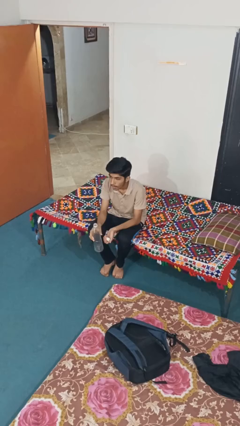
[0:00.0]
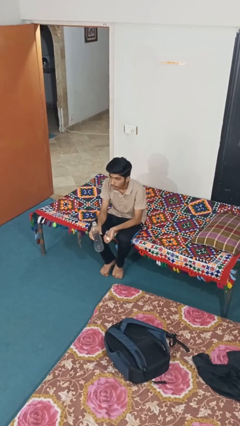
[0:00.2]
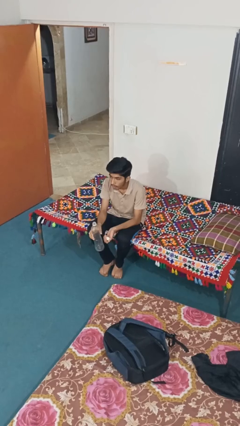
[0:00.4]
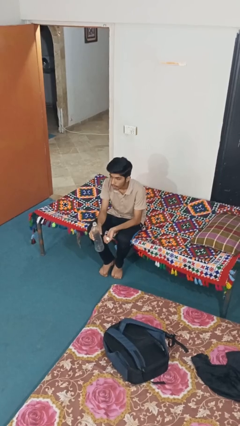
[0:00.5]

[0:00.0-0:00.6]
person drinks from bottle

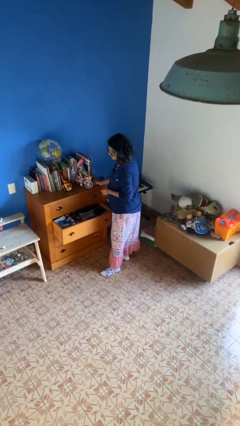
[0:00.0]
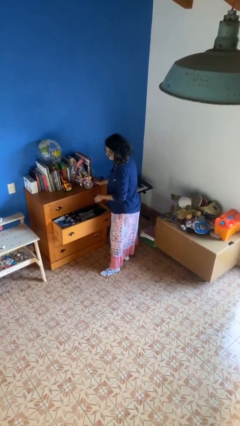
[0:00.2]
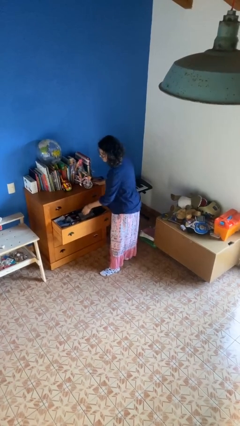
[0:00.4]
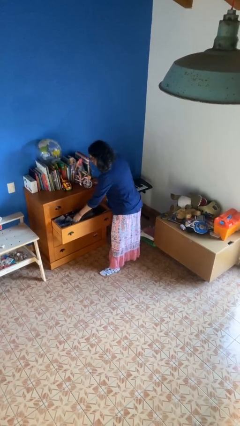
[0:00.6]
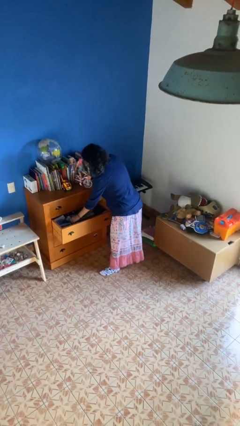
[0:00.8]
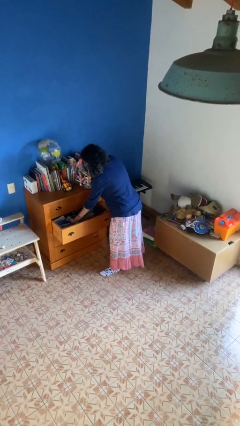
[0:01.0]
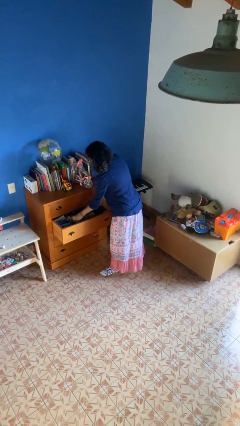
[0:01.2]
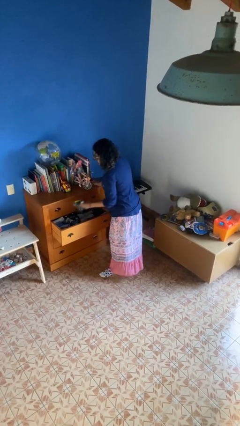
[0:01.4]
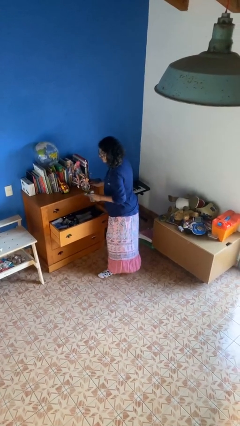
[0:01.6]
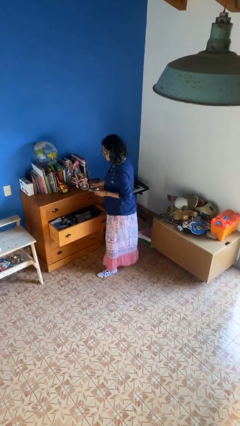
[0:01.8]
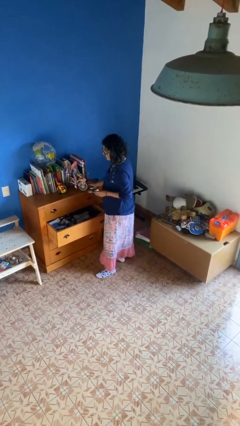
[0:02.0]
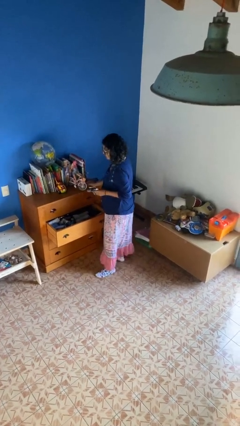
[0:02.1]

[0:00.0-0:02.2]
person takes clothes from dresser

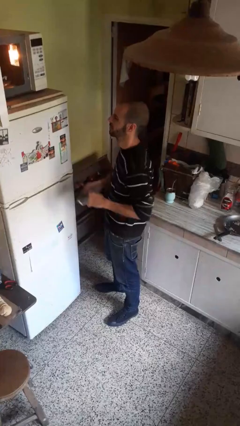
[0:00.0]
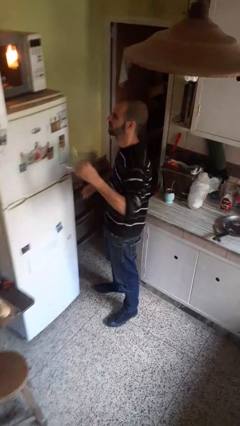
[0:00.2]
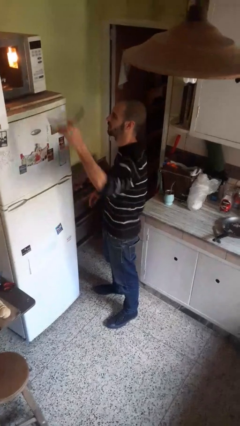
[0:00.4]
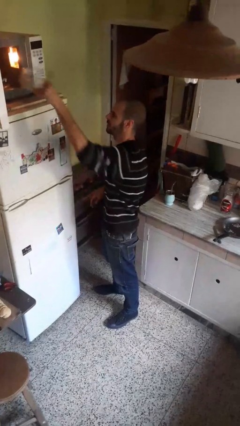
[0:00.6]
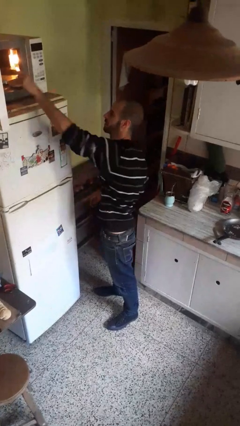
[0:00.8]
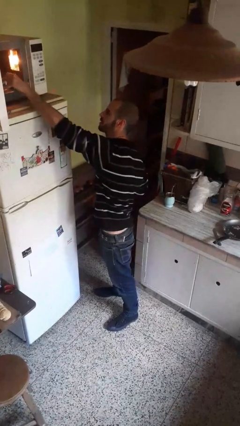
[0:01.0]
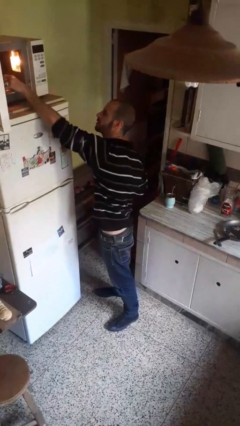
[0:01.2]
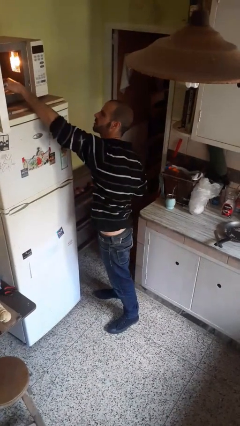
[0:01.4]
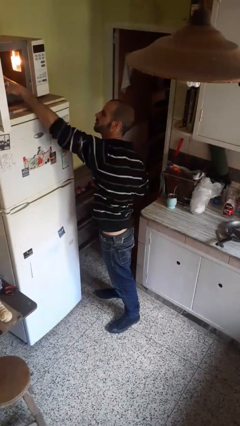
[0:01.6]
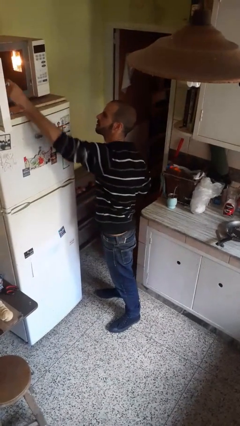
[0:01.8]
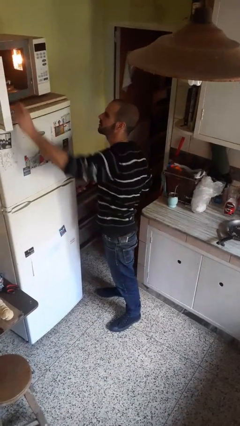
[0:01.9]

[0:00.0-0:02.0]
person puts object into microwave

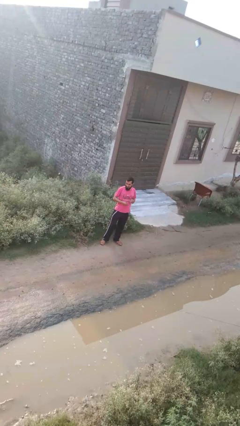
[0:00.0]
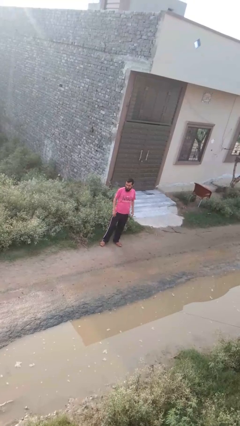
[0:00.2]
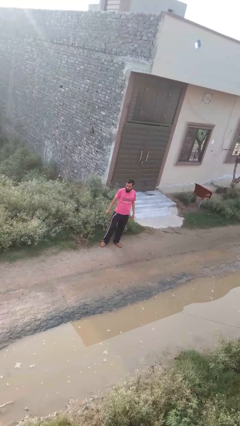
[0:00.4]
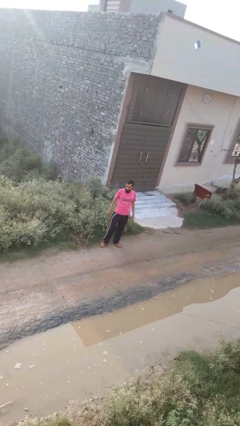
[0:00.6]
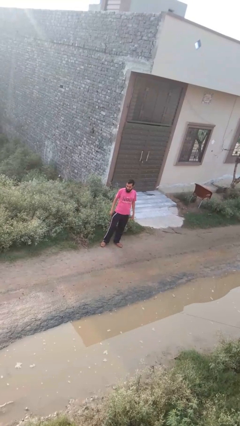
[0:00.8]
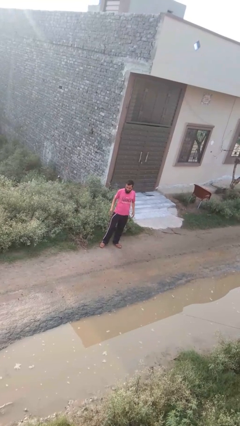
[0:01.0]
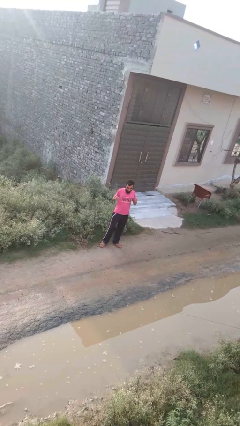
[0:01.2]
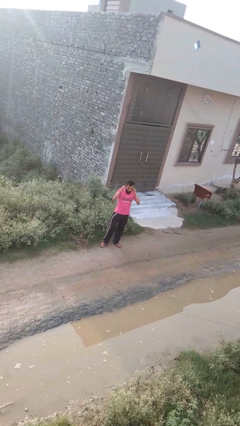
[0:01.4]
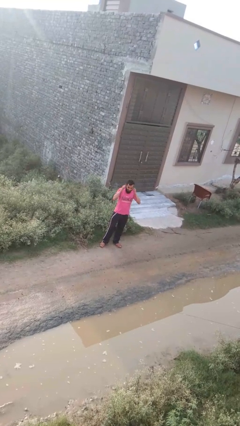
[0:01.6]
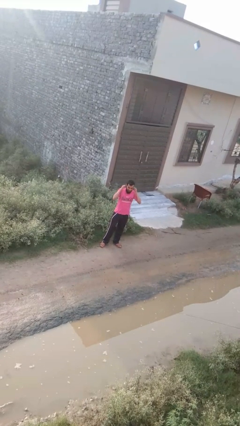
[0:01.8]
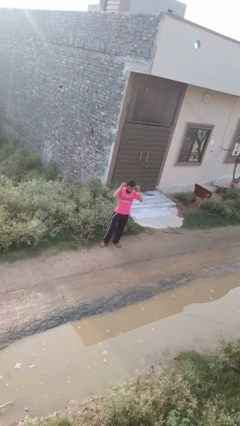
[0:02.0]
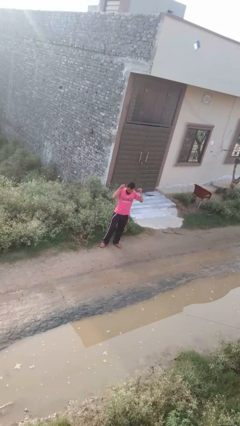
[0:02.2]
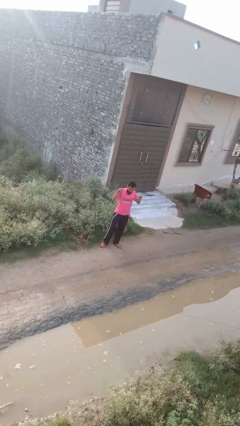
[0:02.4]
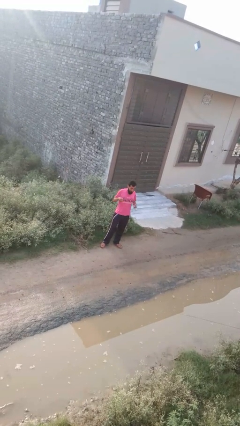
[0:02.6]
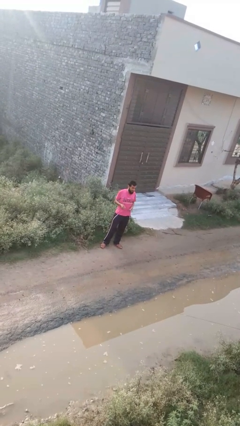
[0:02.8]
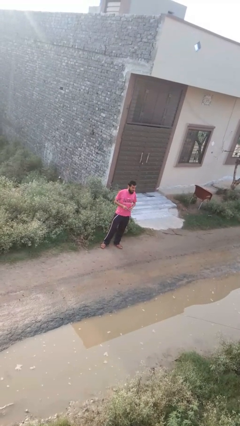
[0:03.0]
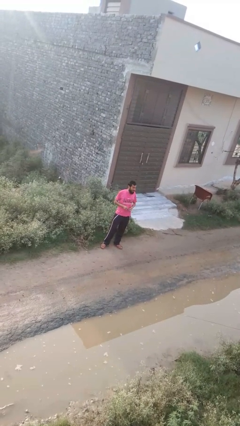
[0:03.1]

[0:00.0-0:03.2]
person takes off earrings

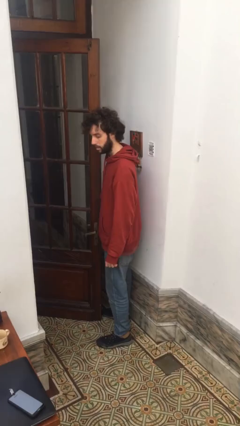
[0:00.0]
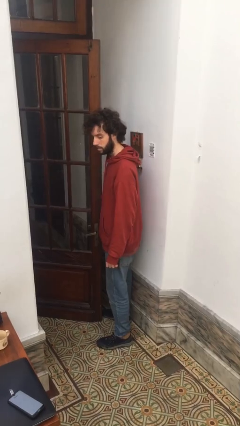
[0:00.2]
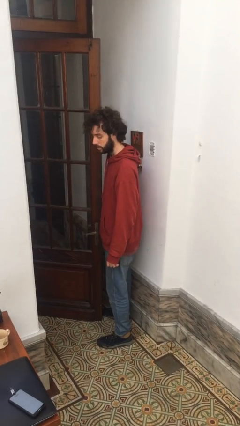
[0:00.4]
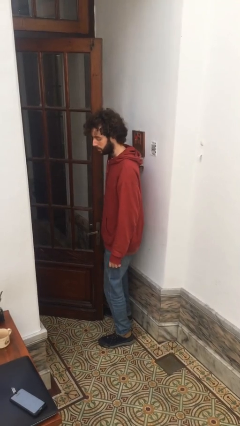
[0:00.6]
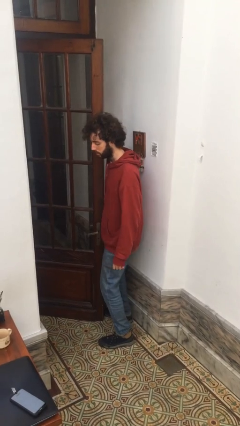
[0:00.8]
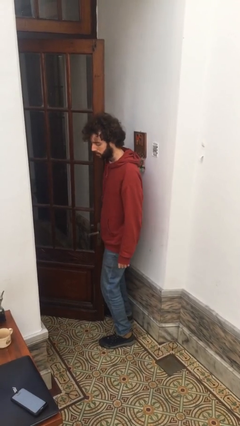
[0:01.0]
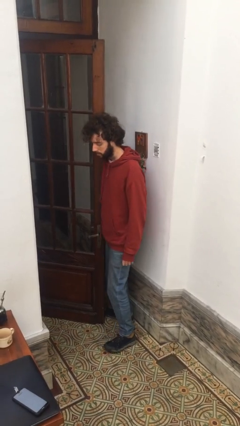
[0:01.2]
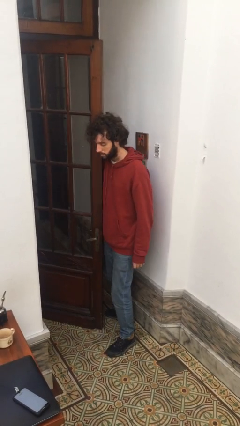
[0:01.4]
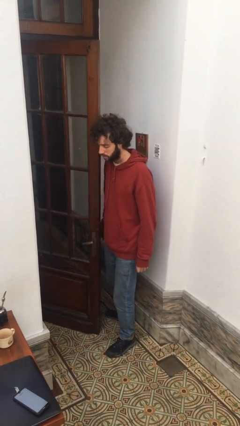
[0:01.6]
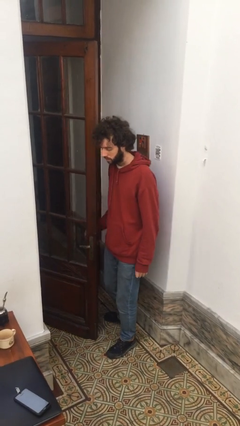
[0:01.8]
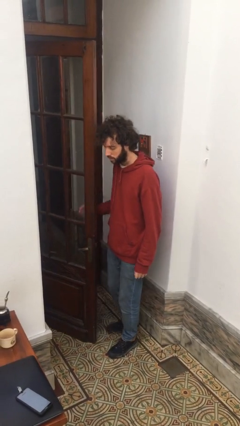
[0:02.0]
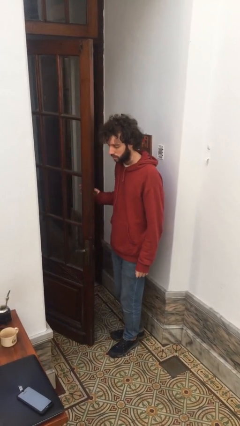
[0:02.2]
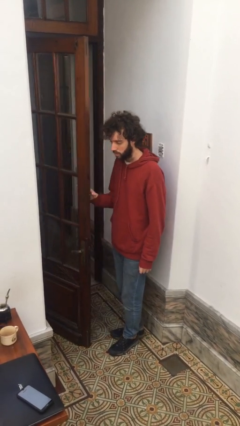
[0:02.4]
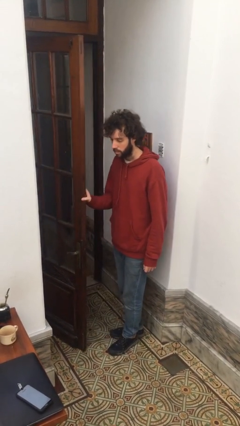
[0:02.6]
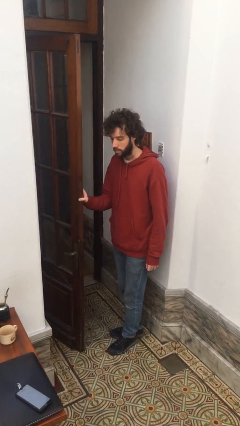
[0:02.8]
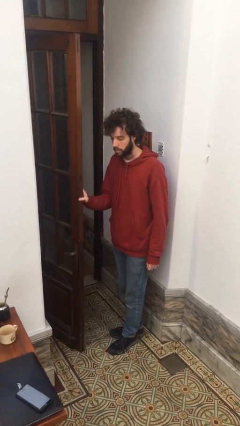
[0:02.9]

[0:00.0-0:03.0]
person opens facility door

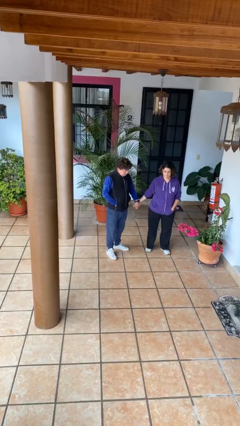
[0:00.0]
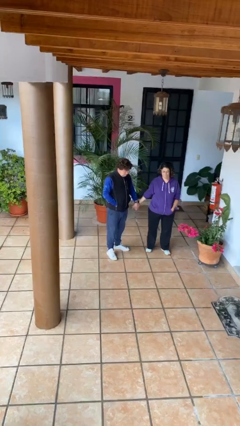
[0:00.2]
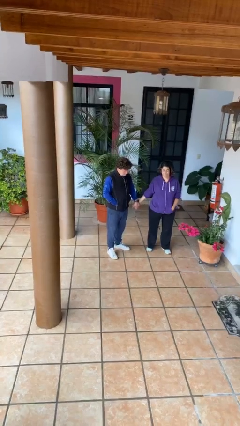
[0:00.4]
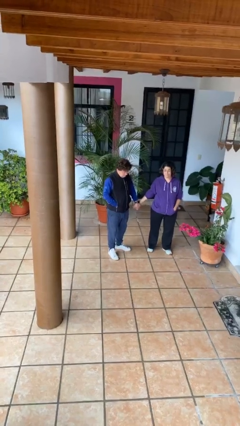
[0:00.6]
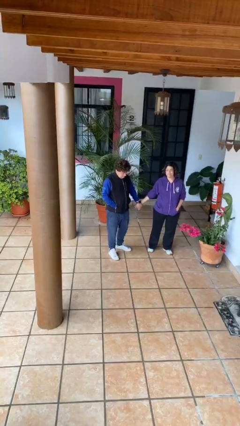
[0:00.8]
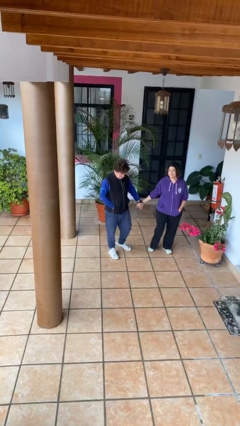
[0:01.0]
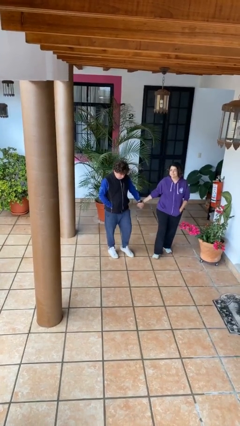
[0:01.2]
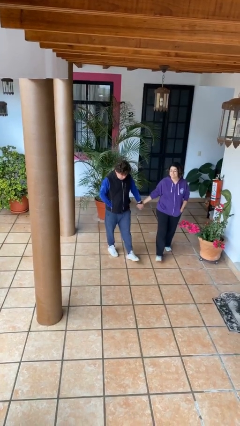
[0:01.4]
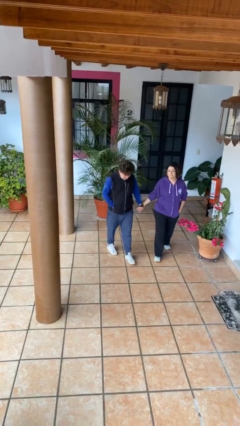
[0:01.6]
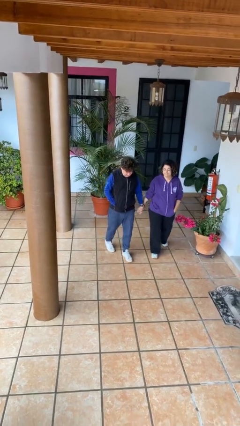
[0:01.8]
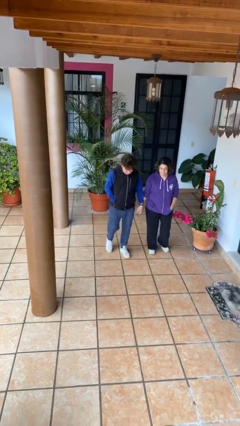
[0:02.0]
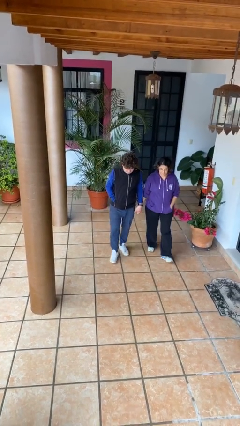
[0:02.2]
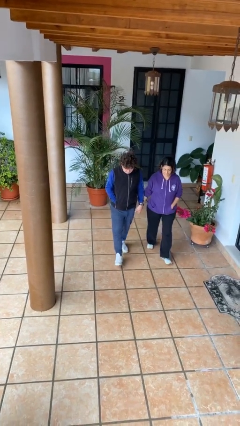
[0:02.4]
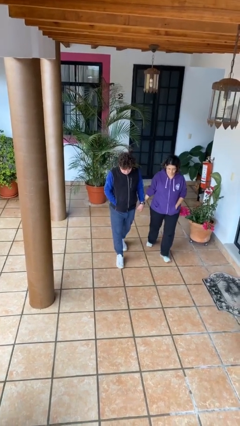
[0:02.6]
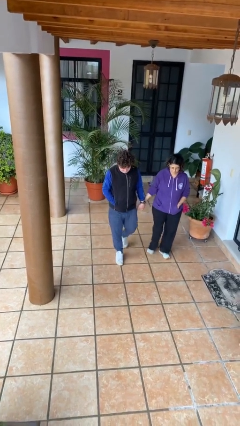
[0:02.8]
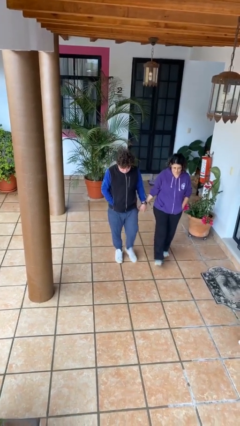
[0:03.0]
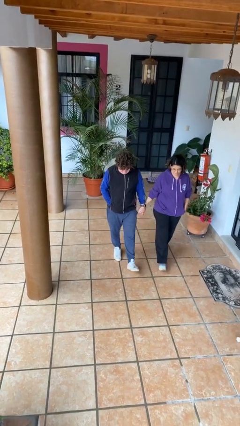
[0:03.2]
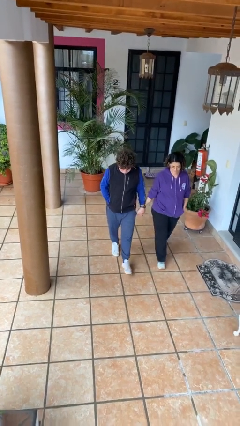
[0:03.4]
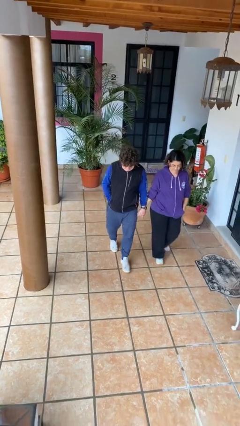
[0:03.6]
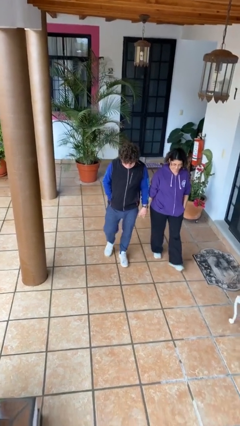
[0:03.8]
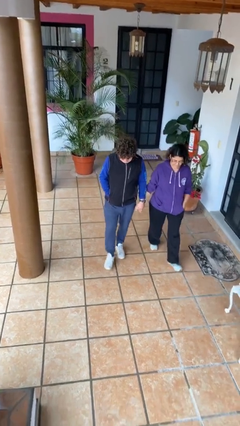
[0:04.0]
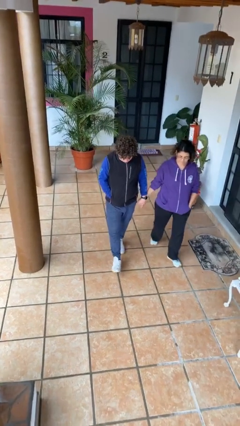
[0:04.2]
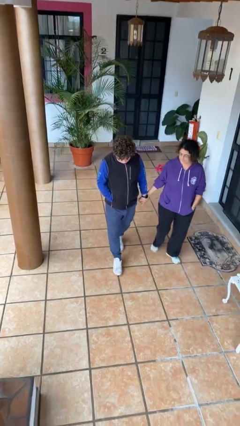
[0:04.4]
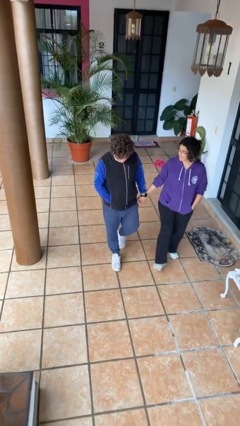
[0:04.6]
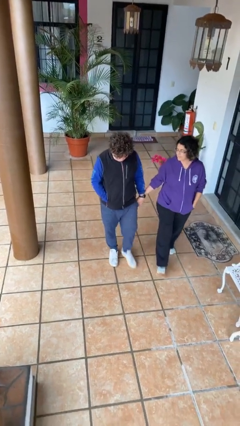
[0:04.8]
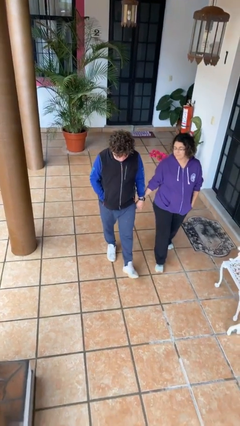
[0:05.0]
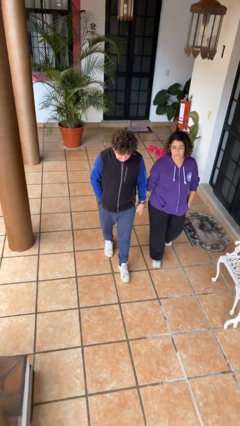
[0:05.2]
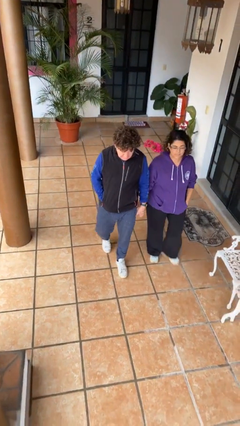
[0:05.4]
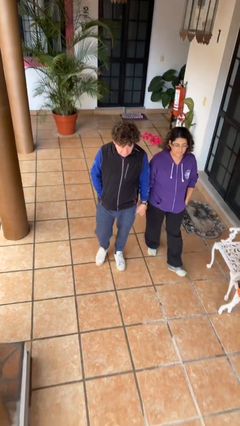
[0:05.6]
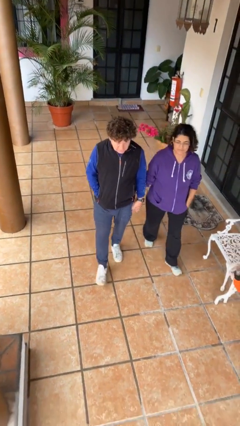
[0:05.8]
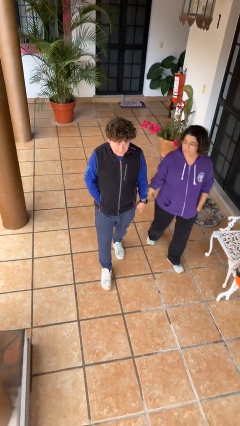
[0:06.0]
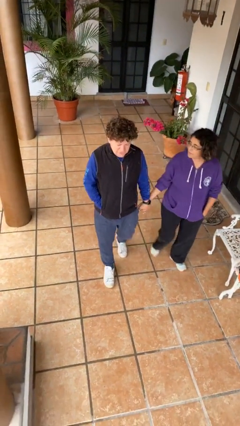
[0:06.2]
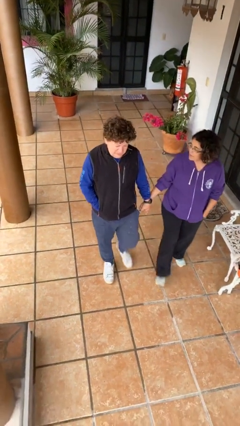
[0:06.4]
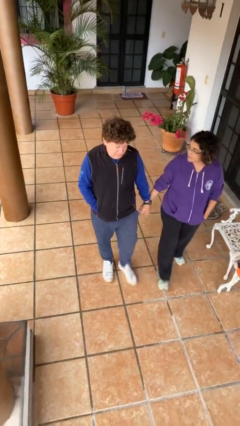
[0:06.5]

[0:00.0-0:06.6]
person holds hand
